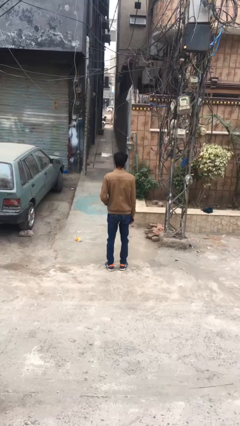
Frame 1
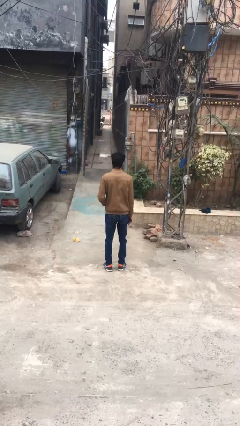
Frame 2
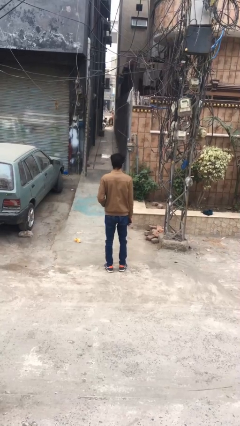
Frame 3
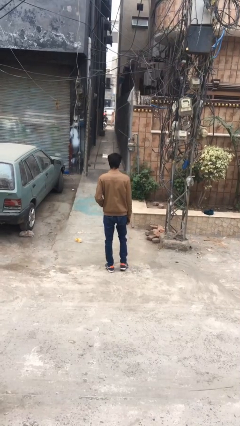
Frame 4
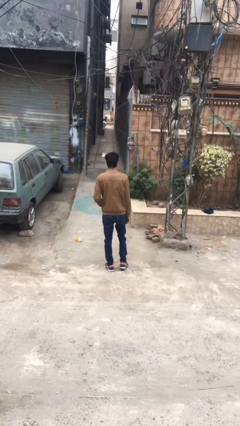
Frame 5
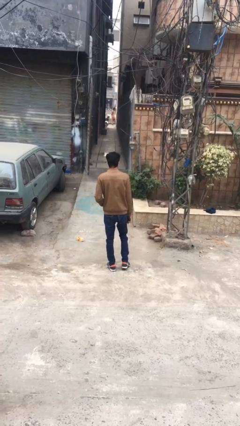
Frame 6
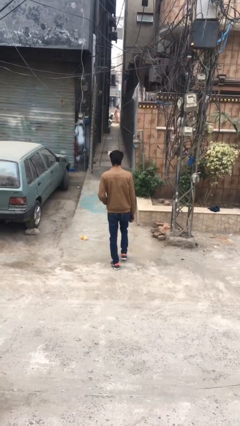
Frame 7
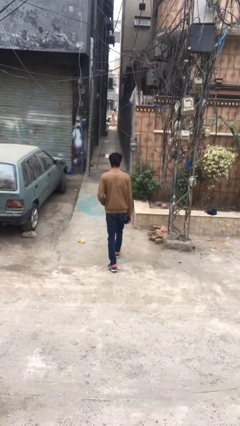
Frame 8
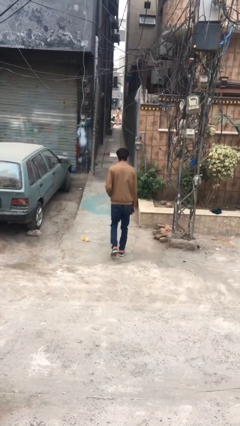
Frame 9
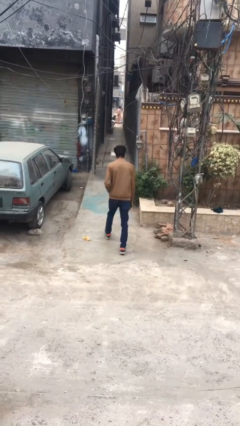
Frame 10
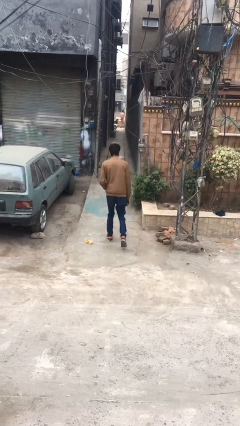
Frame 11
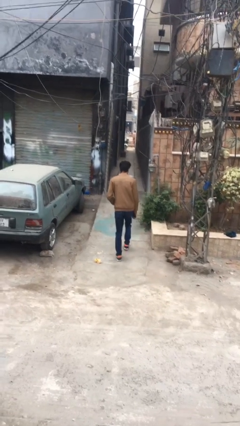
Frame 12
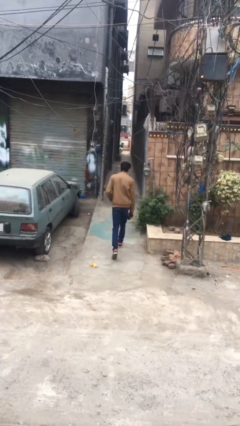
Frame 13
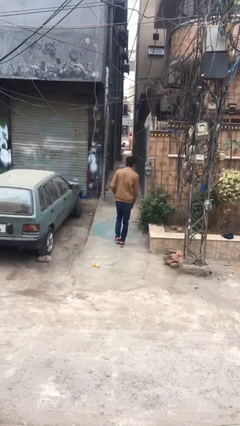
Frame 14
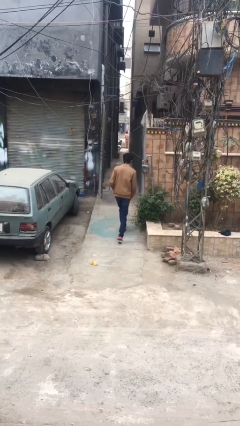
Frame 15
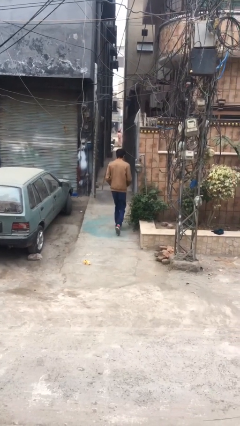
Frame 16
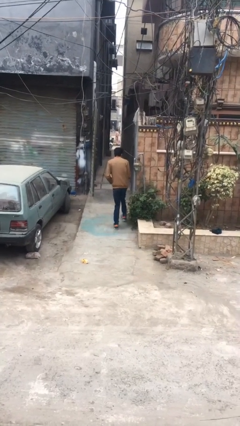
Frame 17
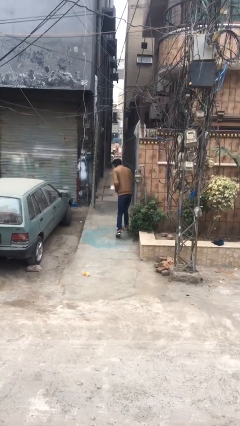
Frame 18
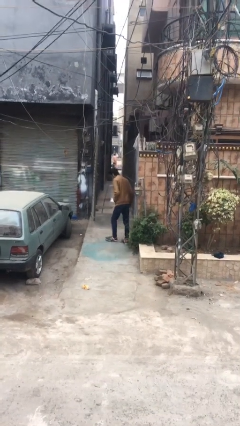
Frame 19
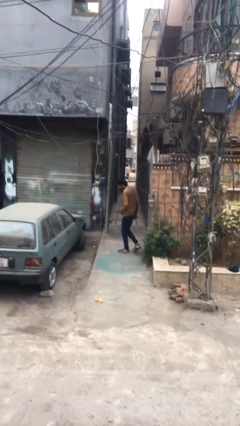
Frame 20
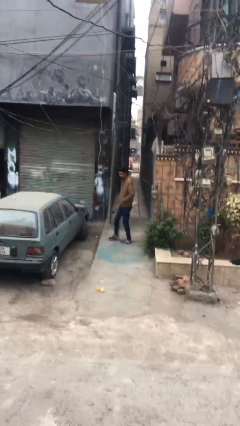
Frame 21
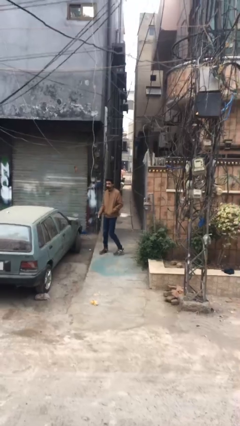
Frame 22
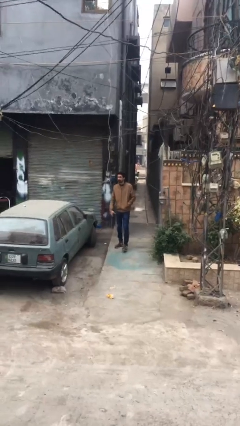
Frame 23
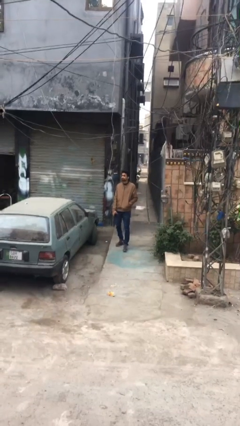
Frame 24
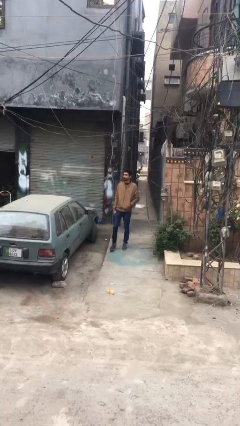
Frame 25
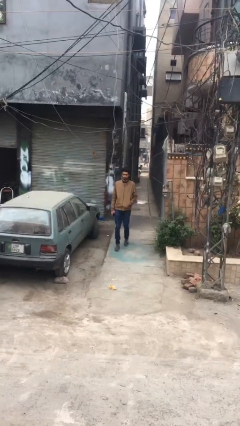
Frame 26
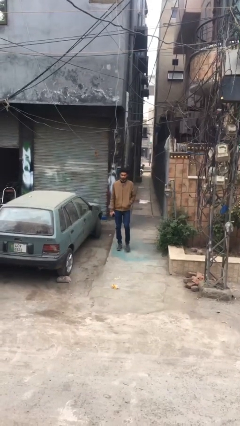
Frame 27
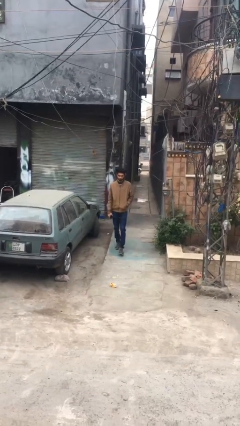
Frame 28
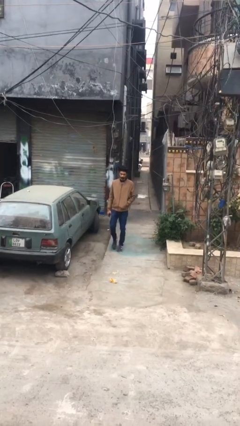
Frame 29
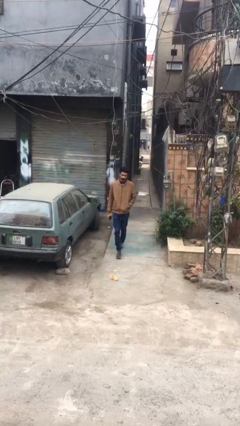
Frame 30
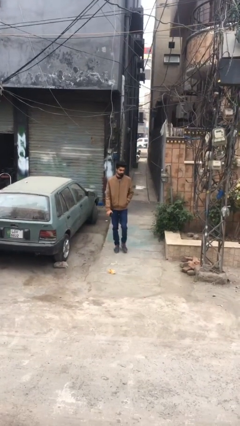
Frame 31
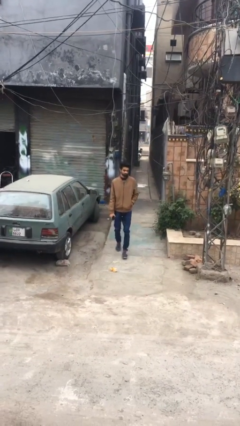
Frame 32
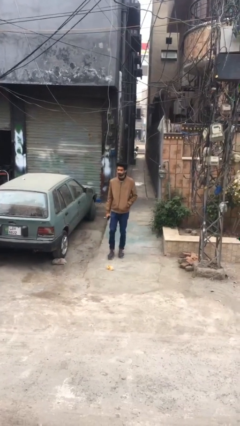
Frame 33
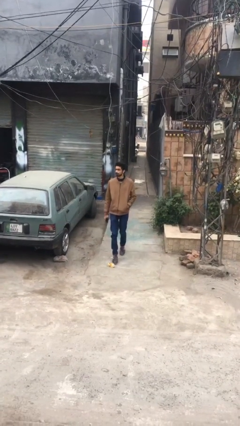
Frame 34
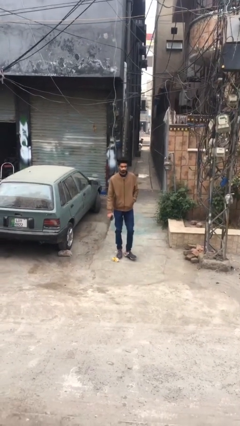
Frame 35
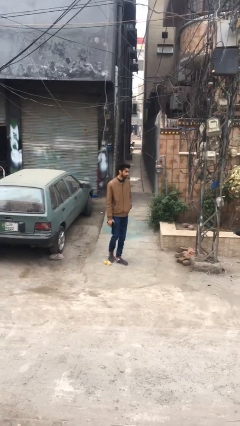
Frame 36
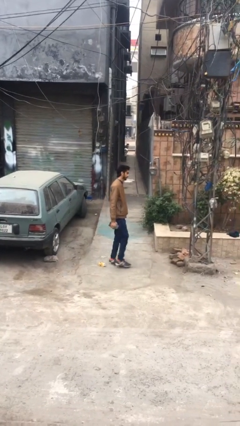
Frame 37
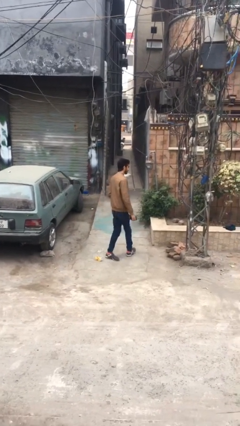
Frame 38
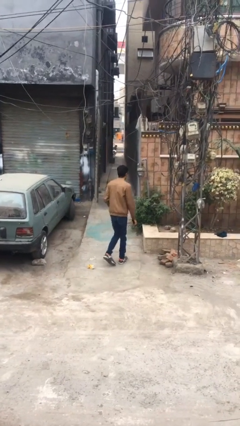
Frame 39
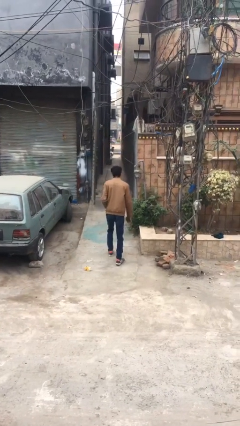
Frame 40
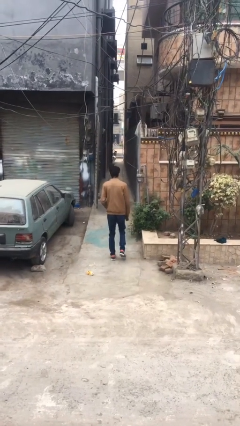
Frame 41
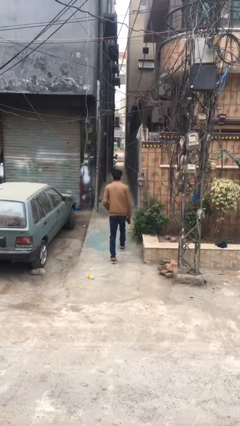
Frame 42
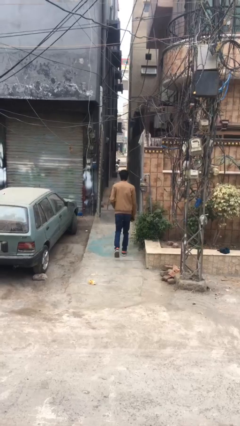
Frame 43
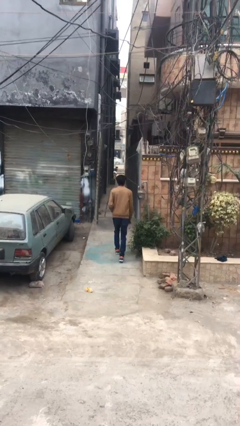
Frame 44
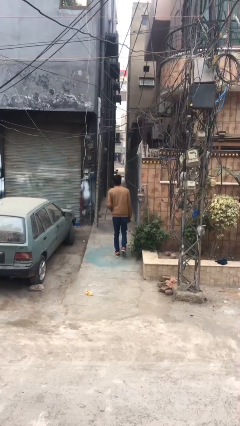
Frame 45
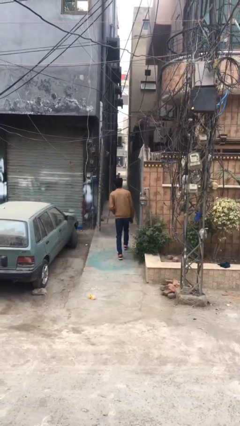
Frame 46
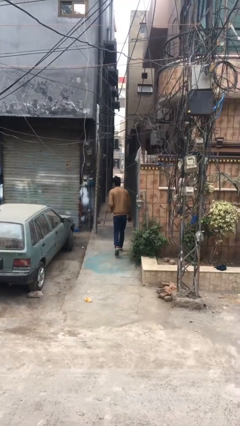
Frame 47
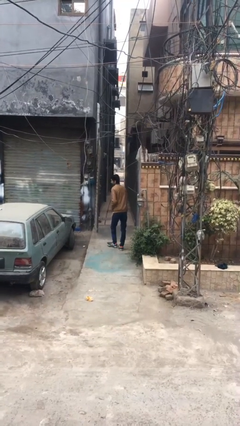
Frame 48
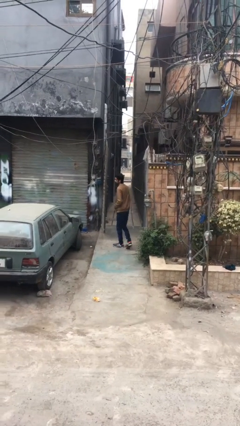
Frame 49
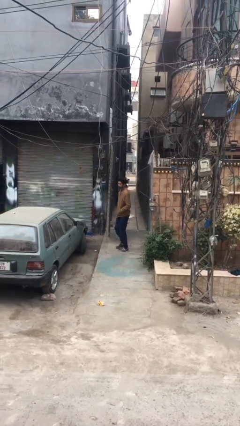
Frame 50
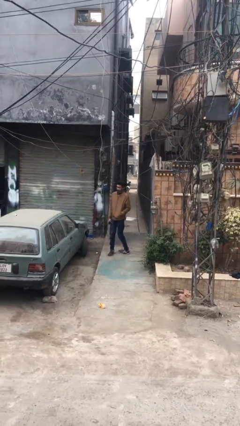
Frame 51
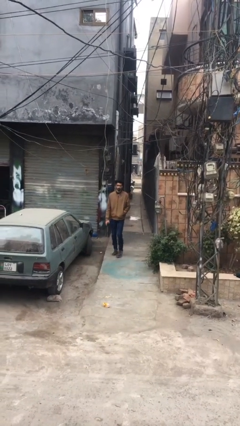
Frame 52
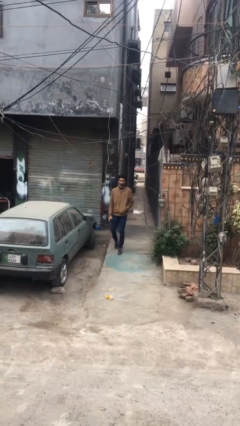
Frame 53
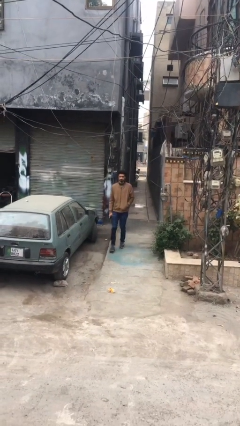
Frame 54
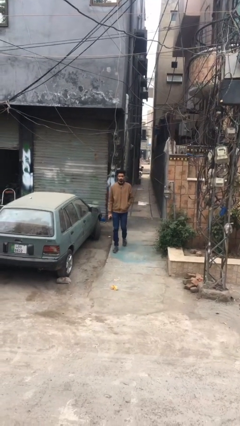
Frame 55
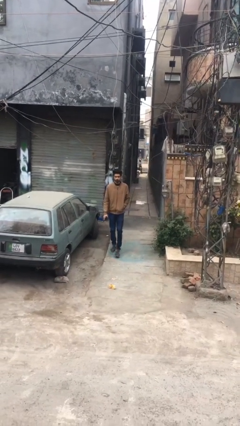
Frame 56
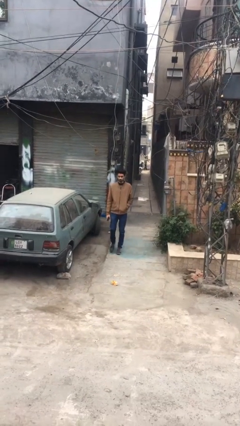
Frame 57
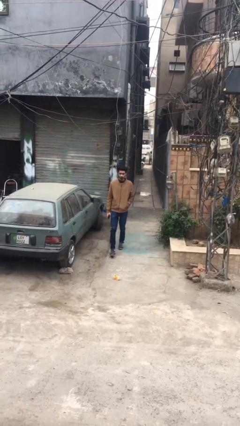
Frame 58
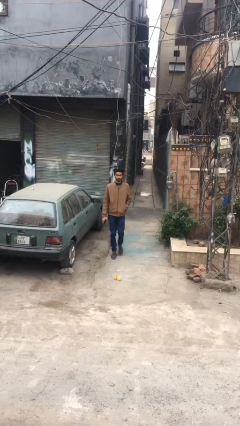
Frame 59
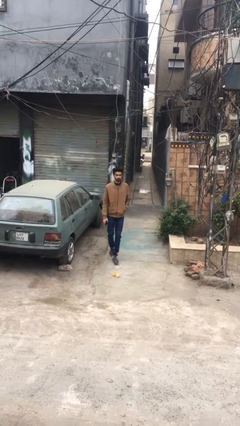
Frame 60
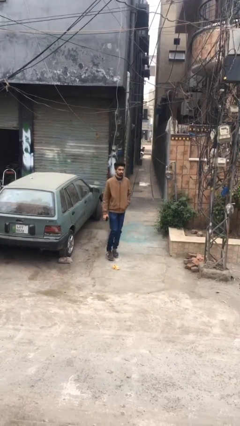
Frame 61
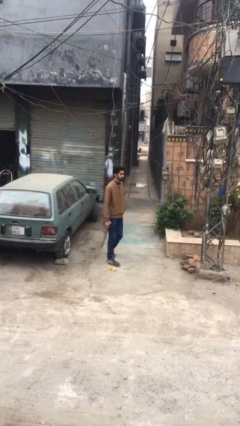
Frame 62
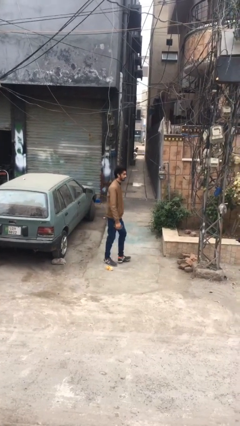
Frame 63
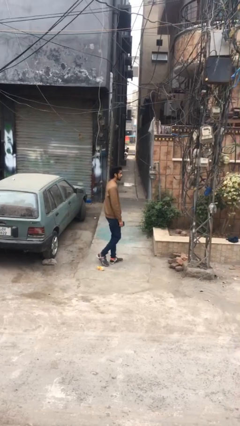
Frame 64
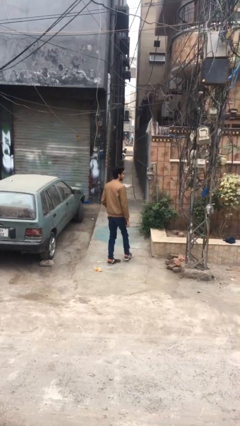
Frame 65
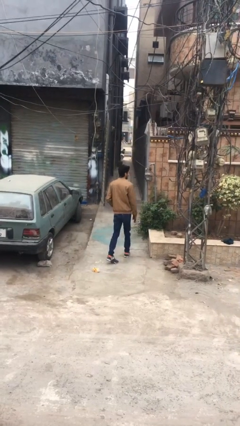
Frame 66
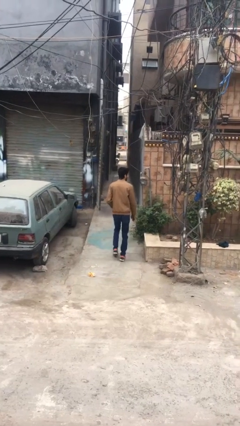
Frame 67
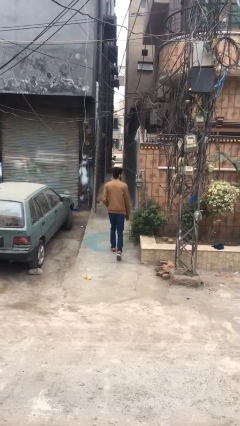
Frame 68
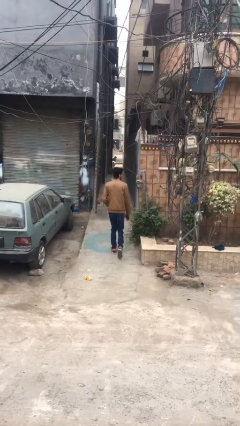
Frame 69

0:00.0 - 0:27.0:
person walks

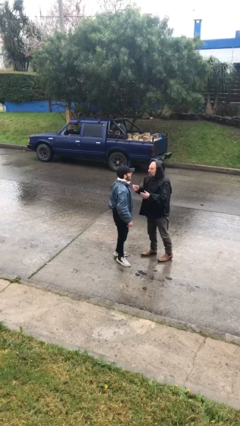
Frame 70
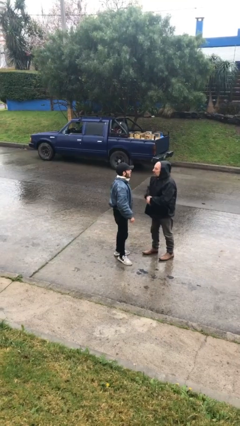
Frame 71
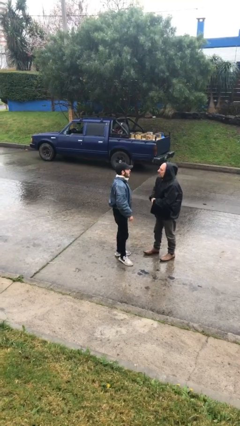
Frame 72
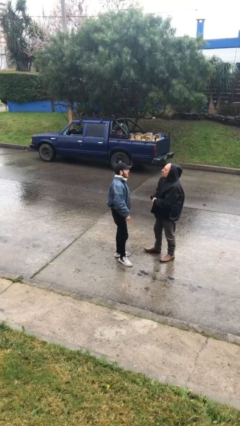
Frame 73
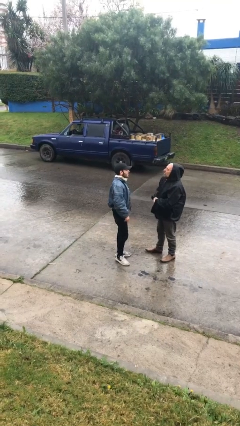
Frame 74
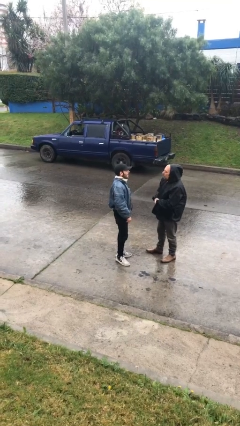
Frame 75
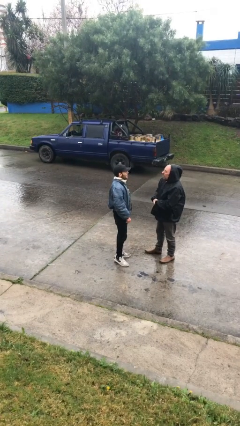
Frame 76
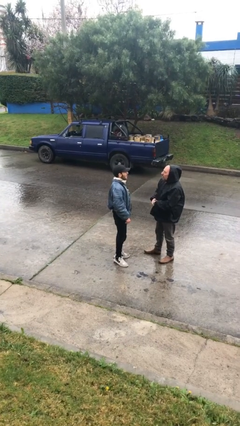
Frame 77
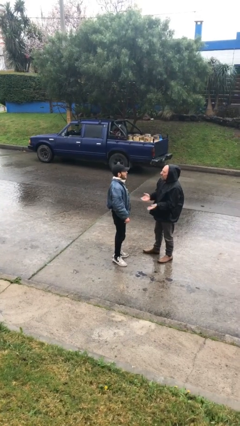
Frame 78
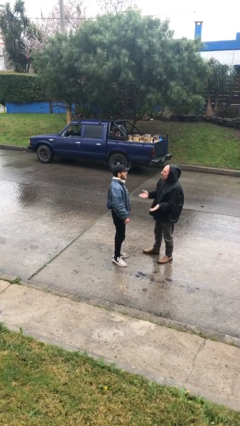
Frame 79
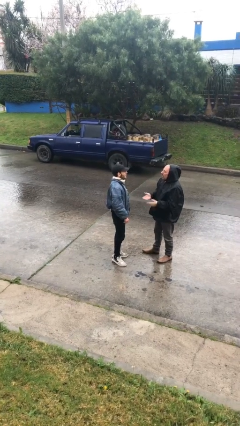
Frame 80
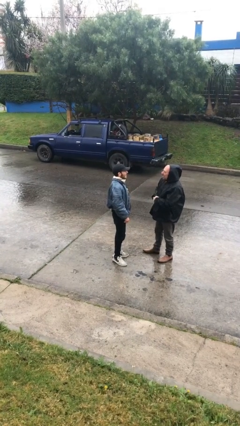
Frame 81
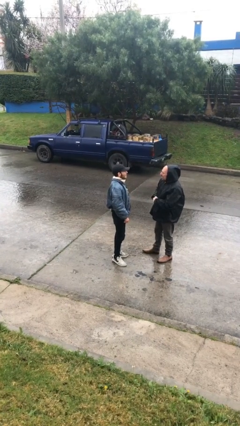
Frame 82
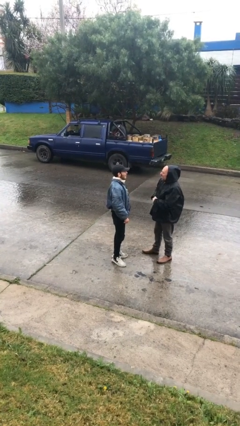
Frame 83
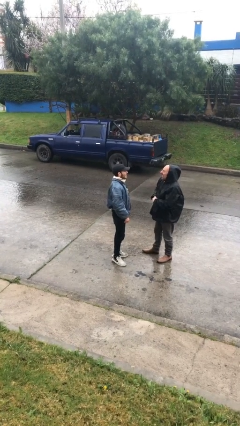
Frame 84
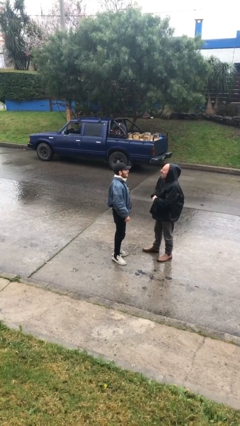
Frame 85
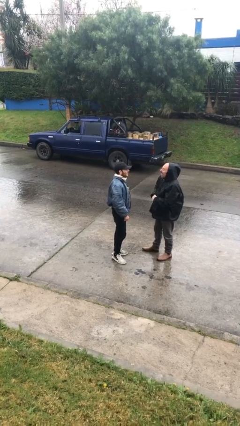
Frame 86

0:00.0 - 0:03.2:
person talks to person

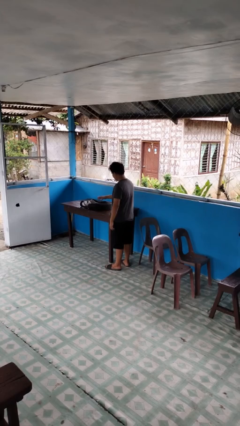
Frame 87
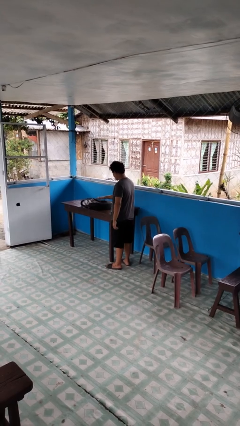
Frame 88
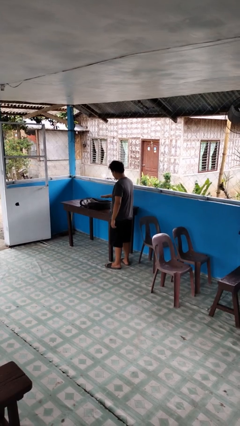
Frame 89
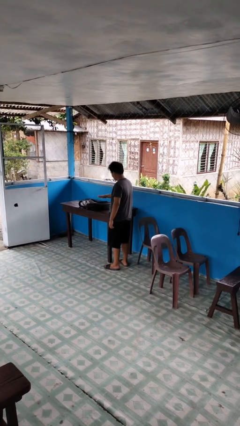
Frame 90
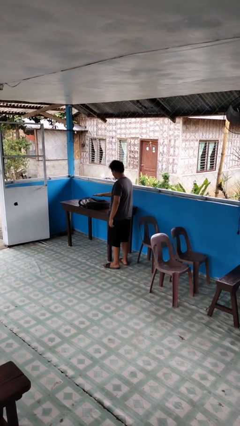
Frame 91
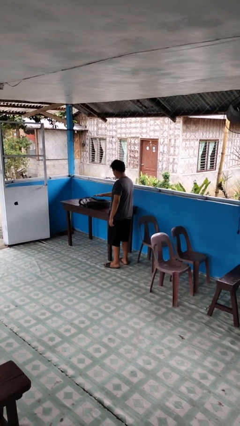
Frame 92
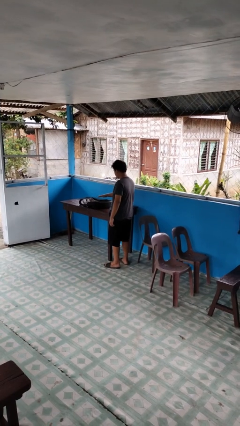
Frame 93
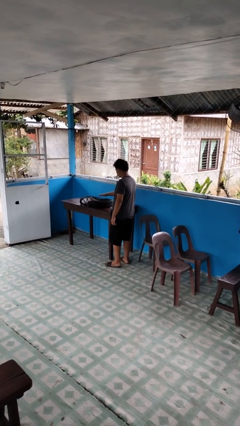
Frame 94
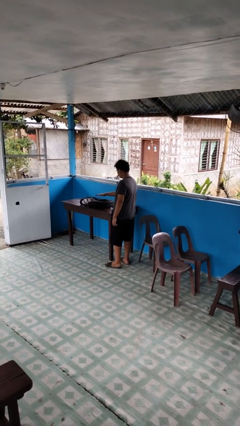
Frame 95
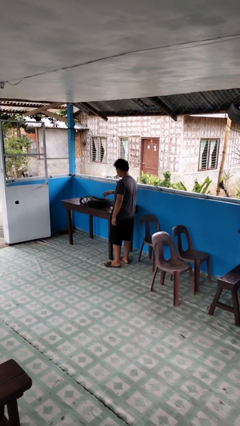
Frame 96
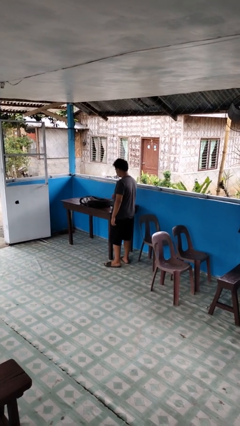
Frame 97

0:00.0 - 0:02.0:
person waves hand over object
